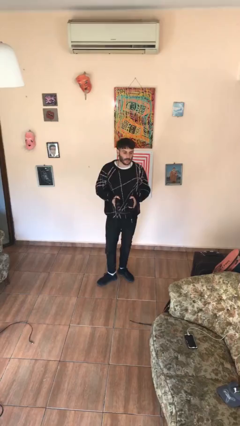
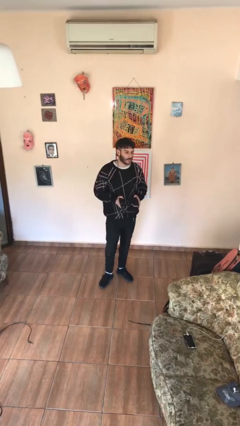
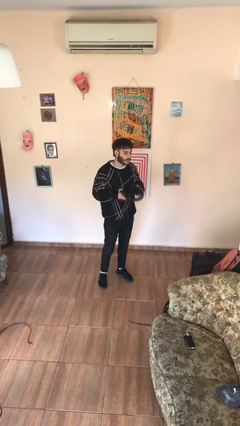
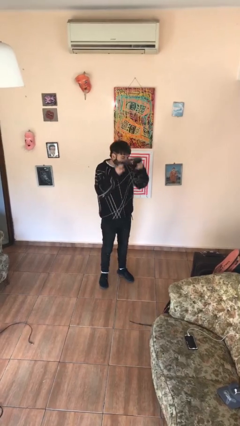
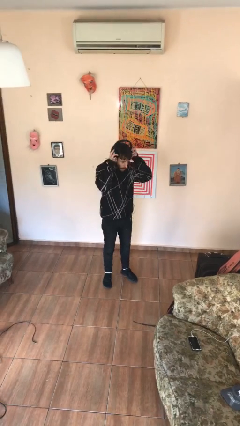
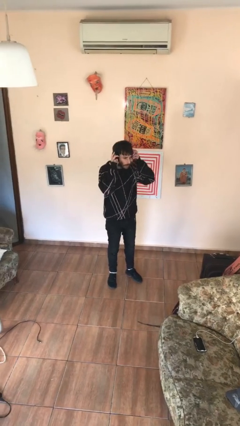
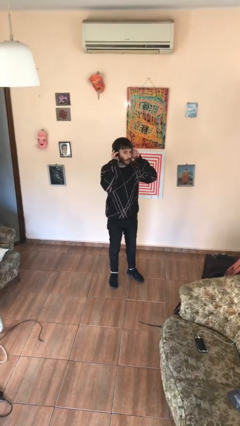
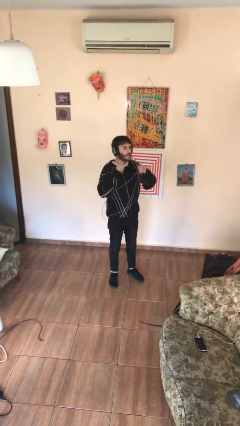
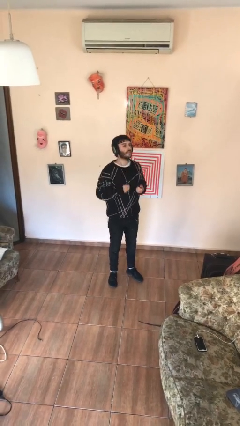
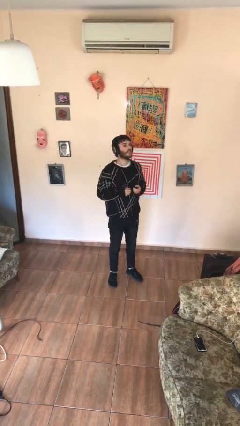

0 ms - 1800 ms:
person puts on headphones

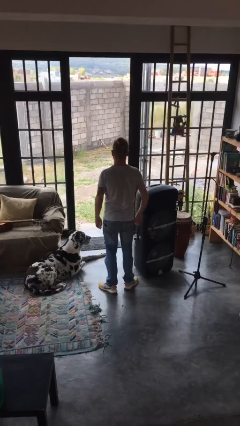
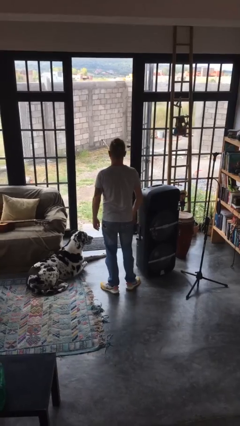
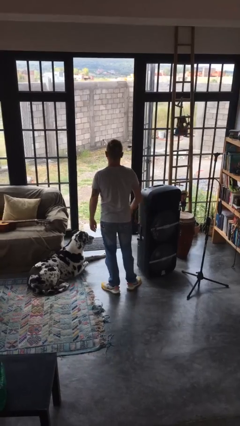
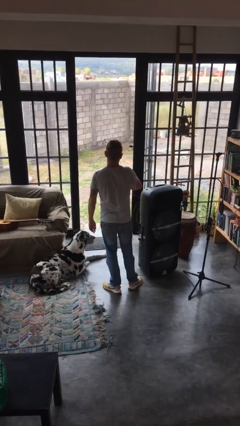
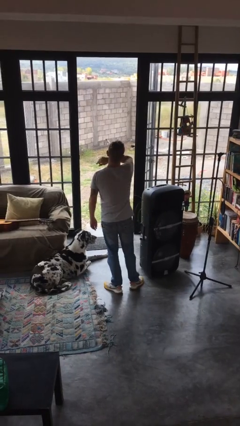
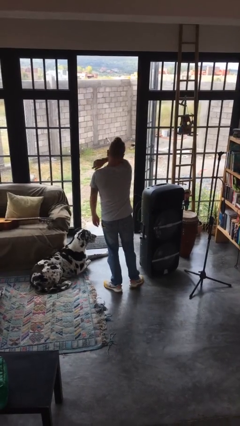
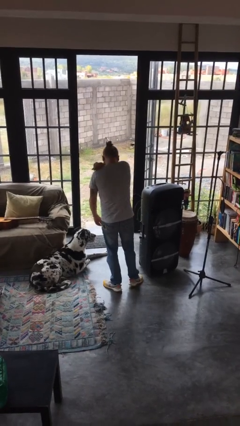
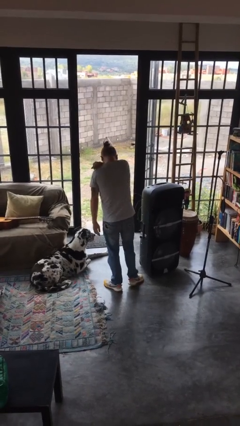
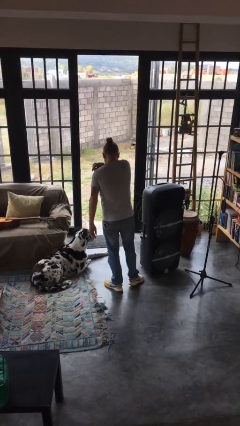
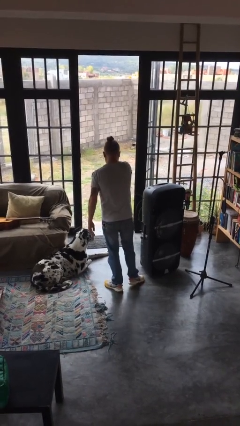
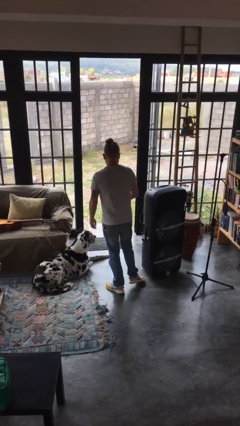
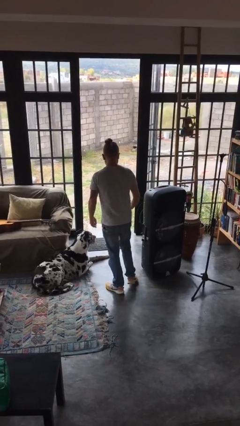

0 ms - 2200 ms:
person sneezes into arm

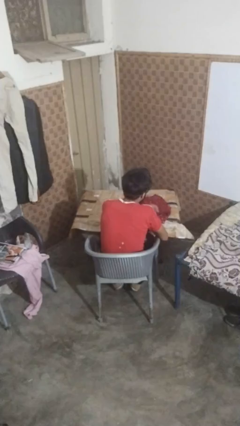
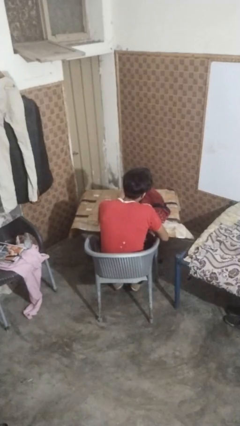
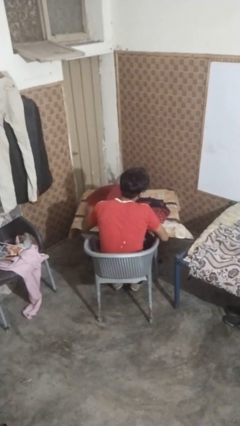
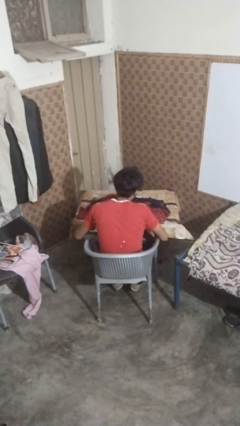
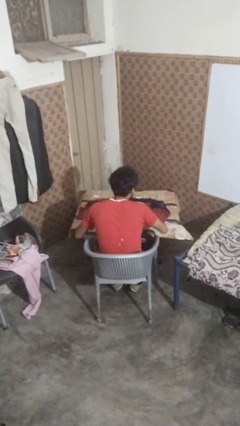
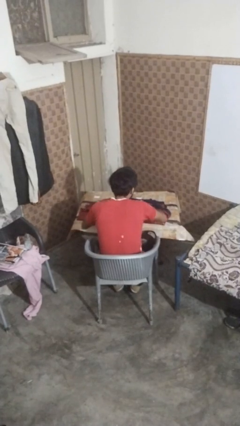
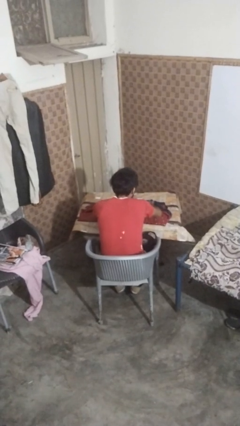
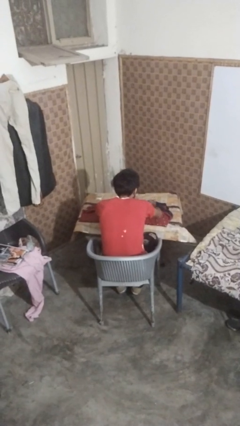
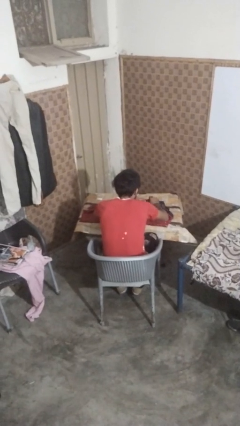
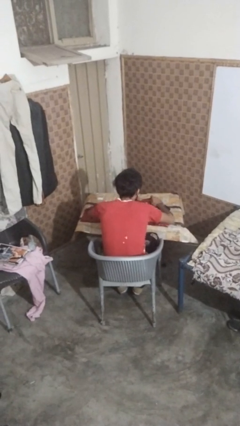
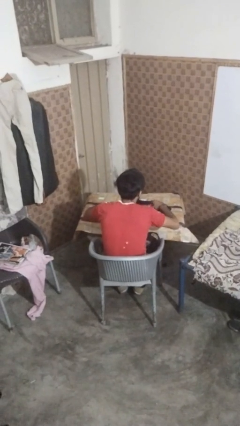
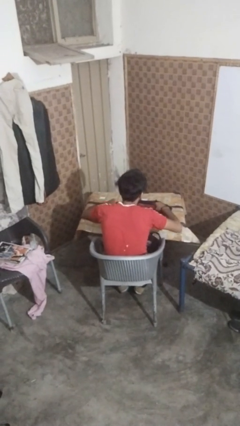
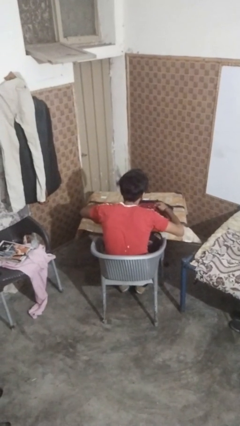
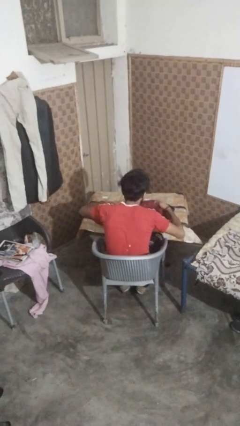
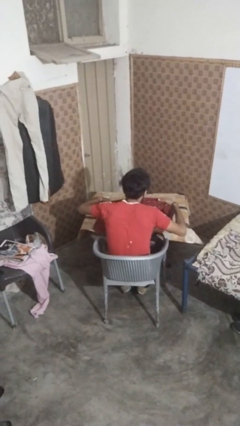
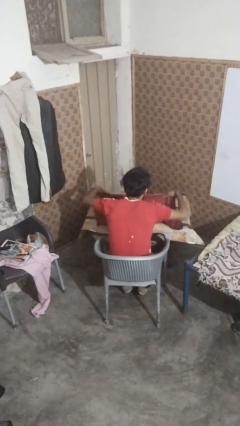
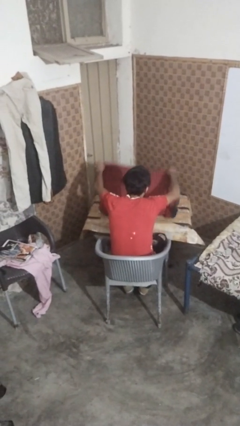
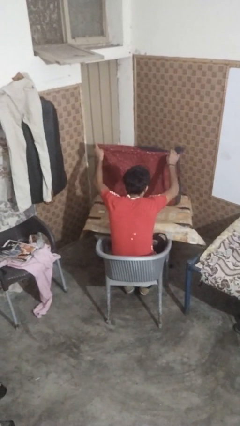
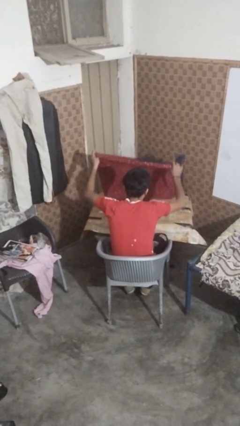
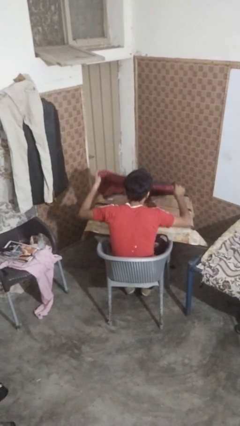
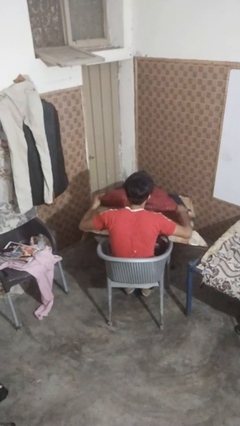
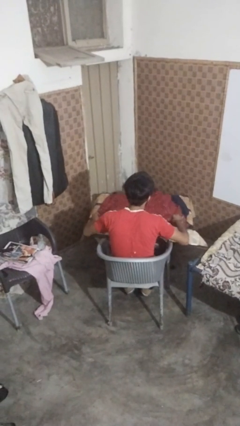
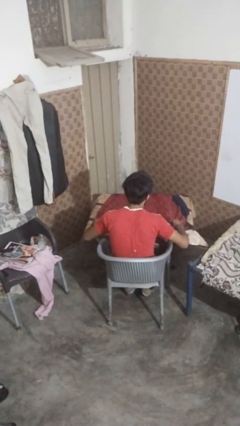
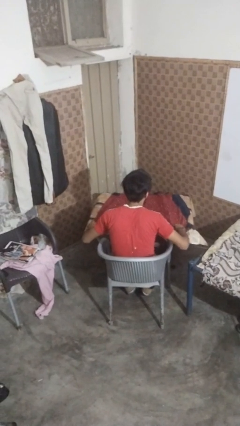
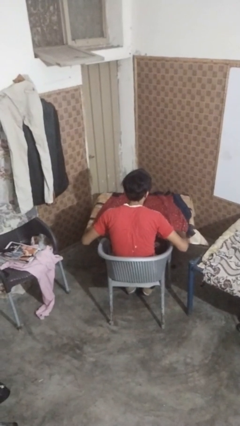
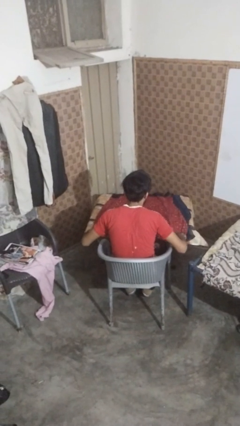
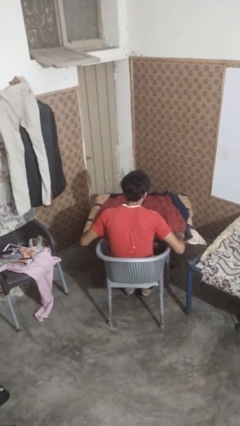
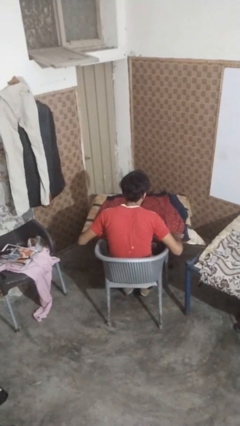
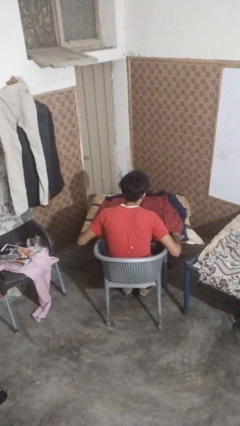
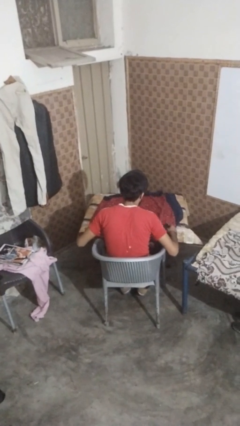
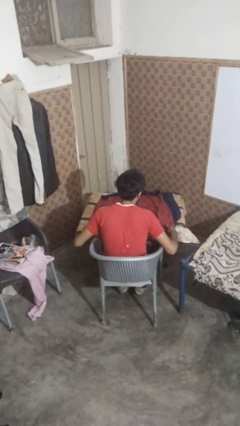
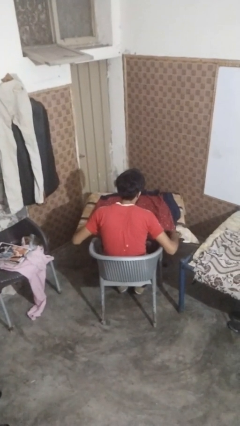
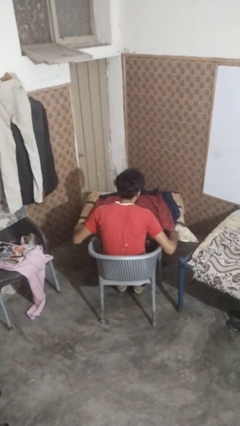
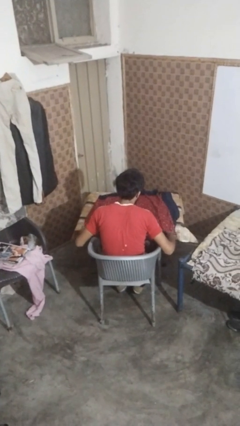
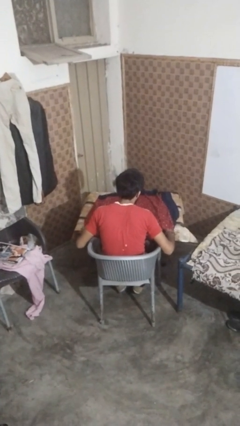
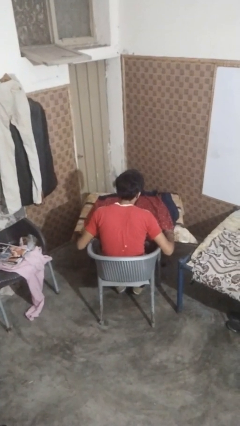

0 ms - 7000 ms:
person spreads tablecloth

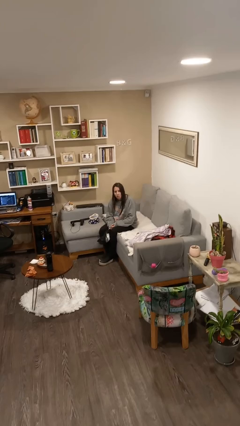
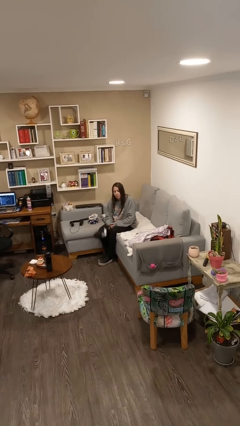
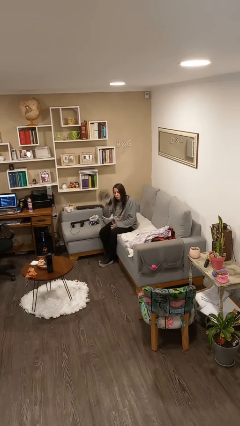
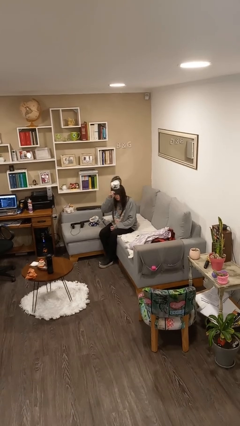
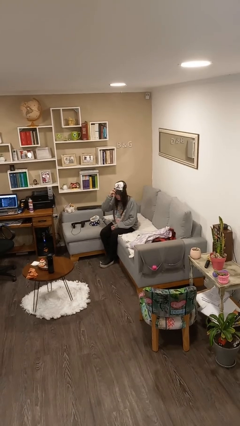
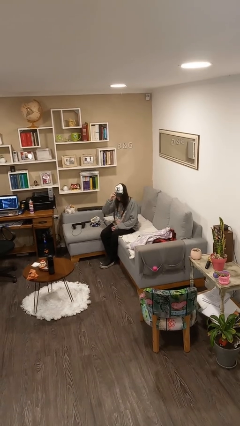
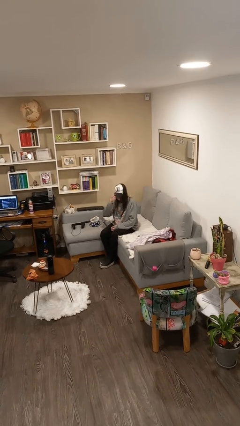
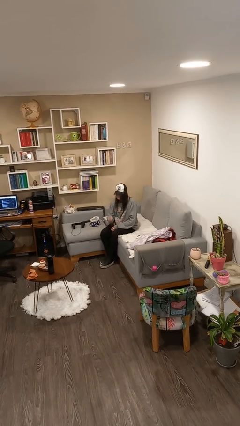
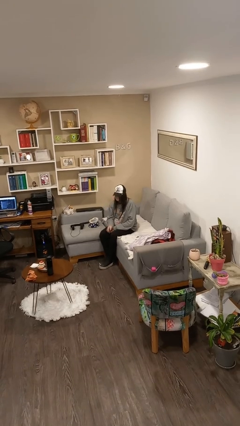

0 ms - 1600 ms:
person puts on hat

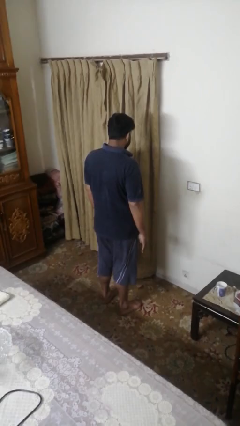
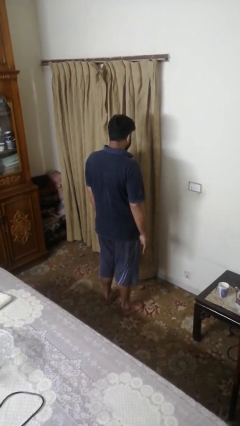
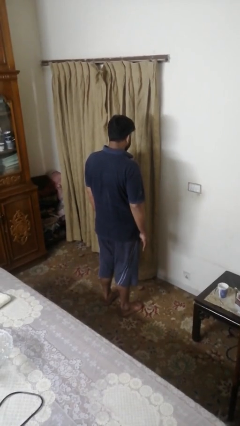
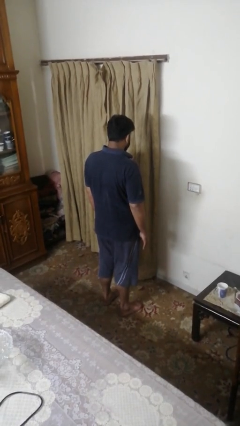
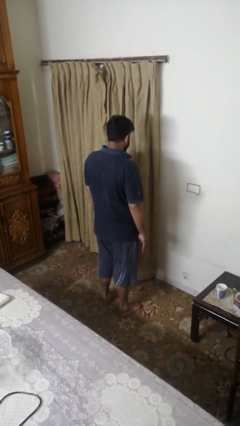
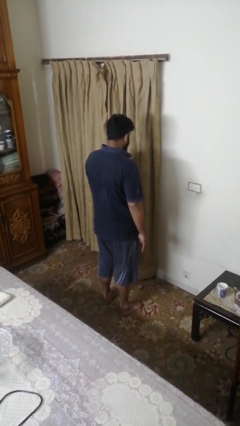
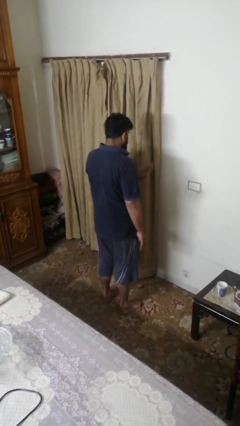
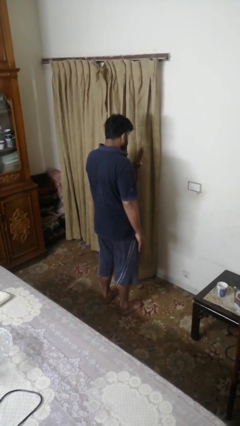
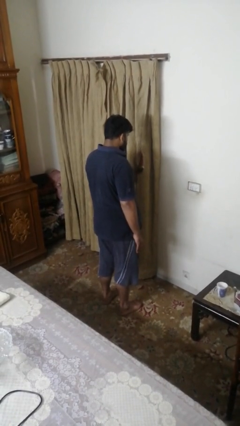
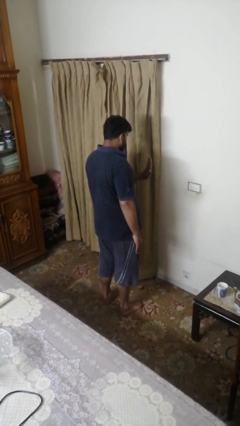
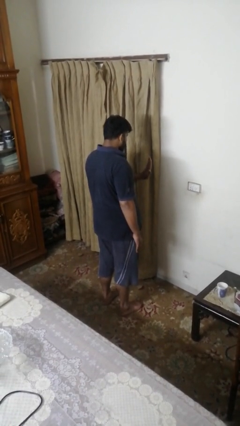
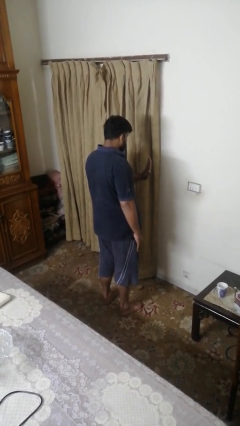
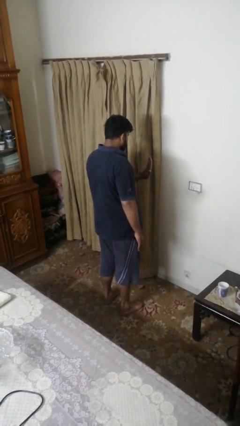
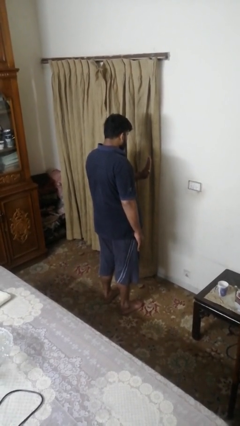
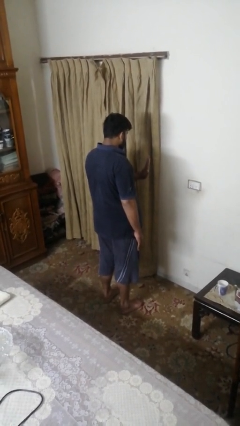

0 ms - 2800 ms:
person gestures stop

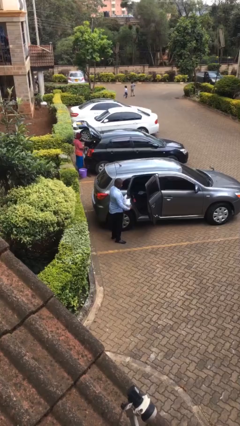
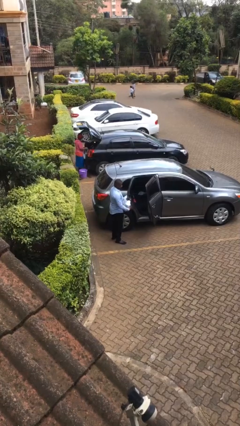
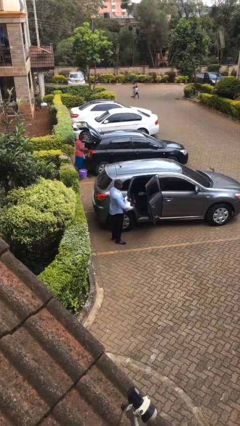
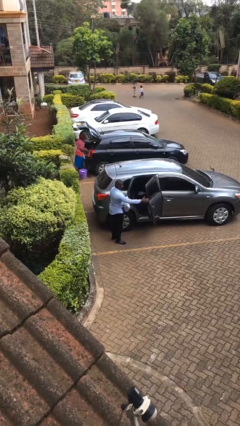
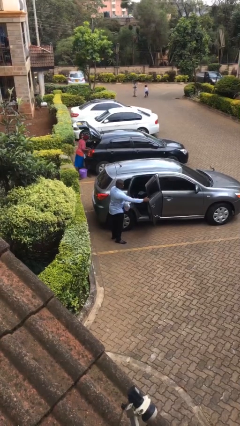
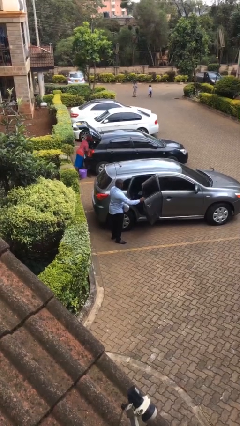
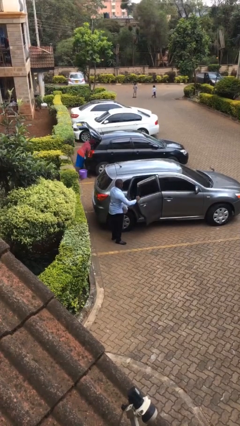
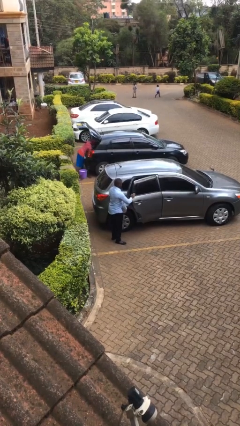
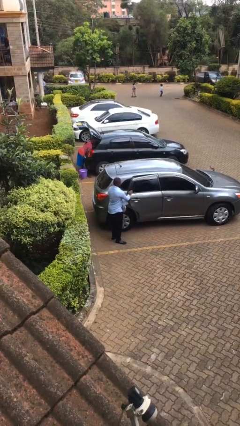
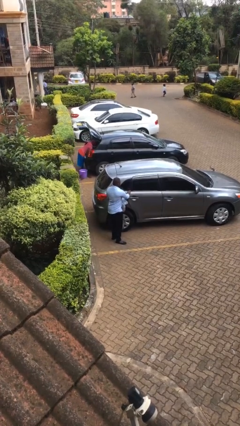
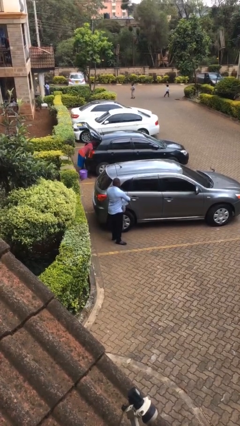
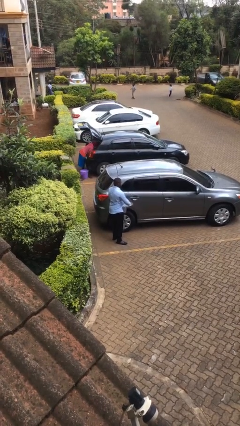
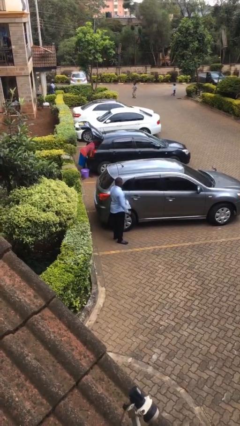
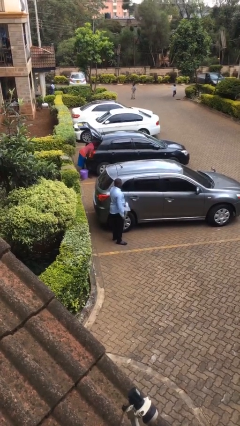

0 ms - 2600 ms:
person closes car door
